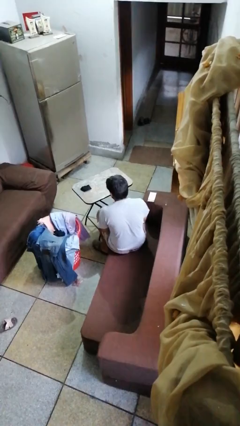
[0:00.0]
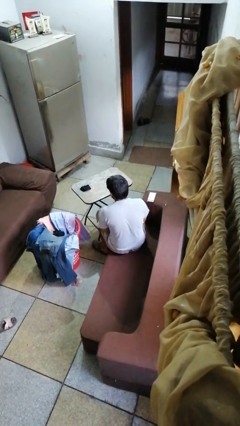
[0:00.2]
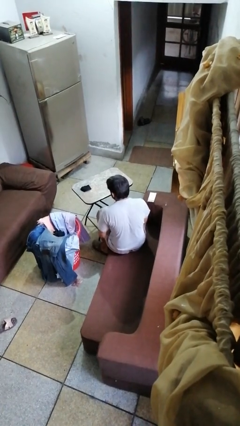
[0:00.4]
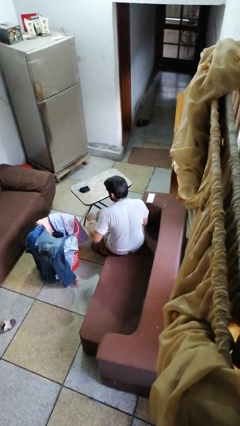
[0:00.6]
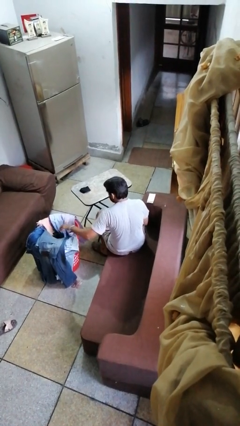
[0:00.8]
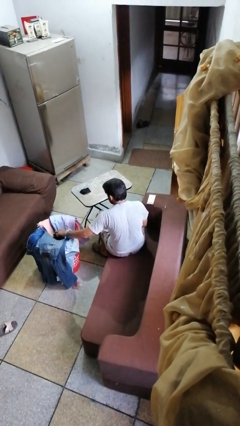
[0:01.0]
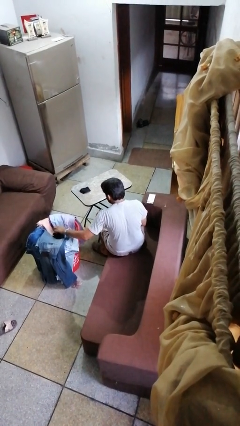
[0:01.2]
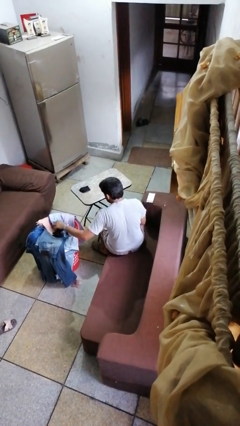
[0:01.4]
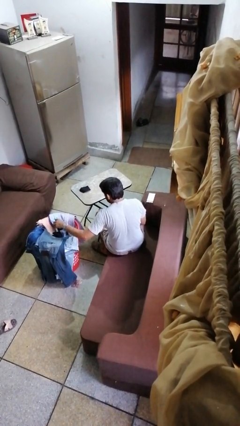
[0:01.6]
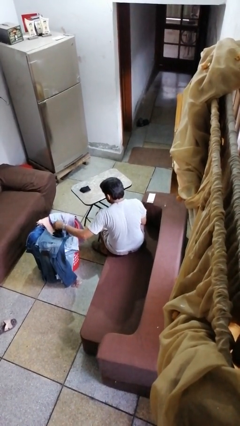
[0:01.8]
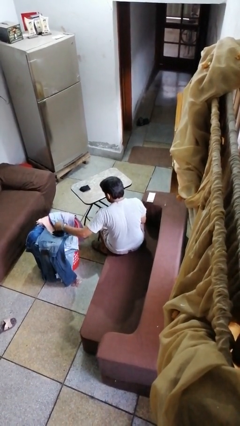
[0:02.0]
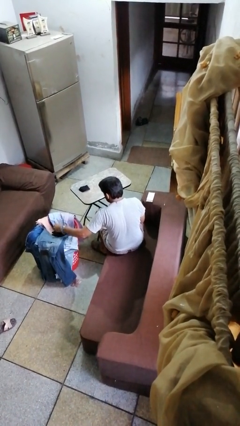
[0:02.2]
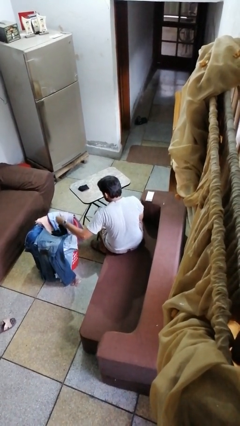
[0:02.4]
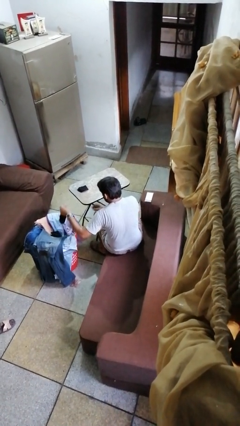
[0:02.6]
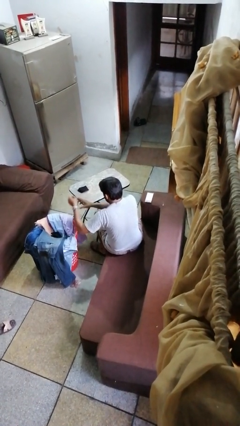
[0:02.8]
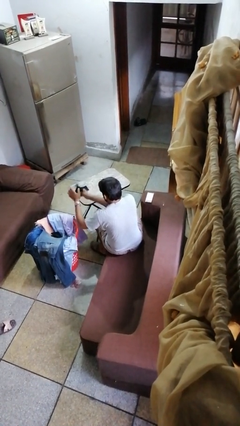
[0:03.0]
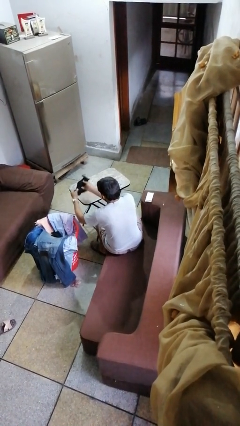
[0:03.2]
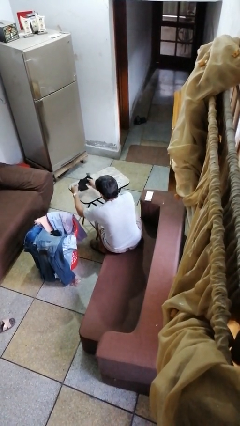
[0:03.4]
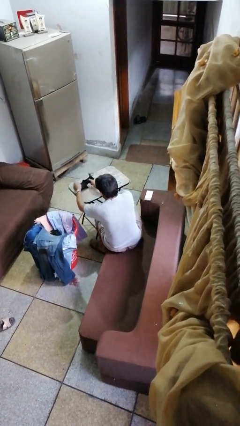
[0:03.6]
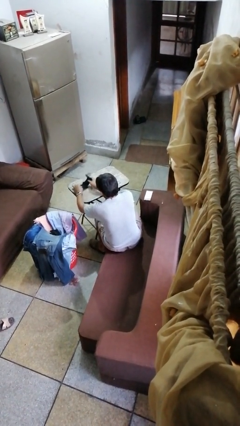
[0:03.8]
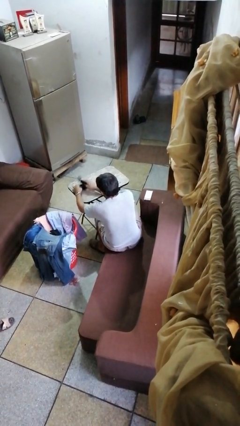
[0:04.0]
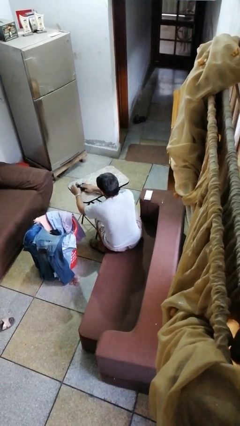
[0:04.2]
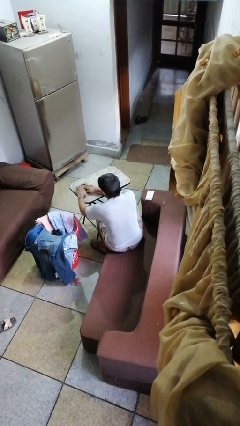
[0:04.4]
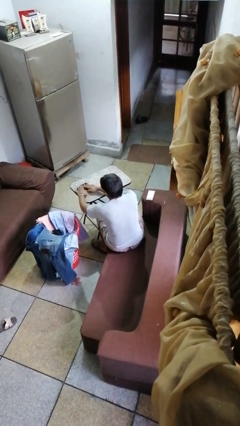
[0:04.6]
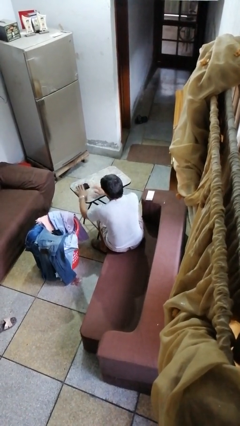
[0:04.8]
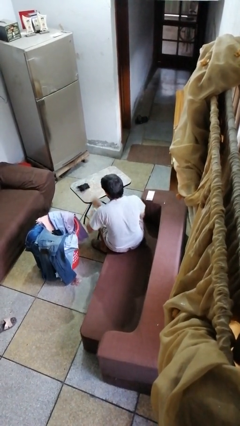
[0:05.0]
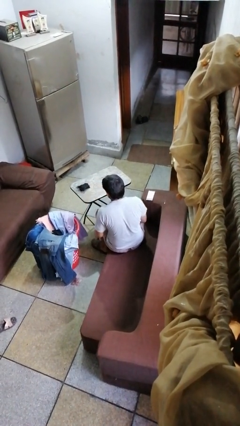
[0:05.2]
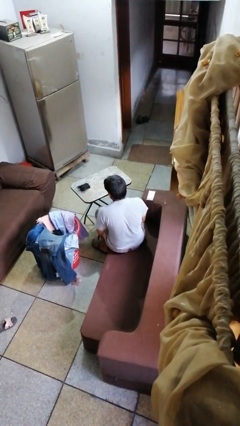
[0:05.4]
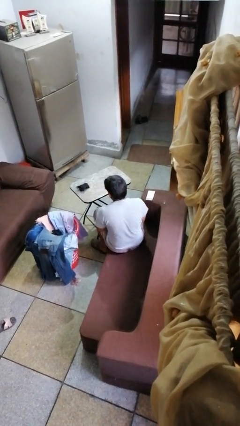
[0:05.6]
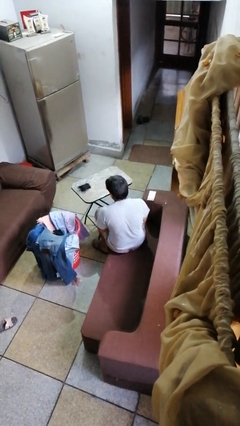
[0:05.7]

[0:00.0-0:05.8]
person folds socks

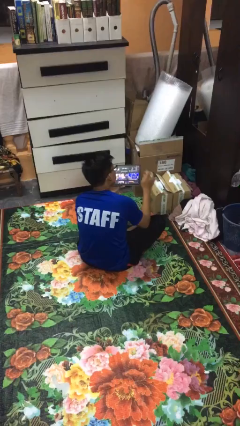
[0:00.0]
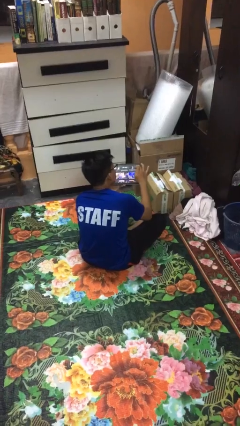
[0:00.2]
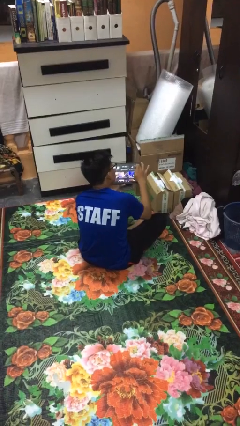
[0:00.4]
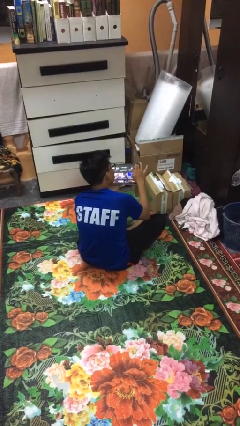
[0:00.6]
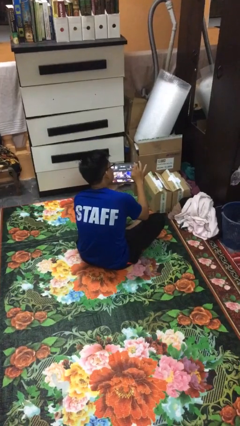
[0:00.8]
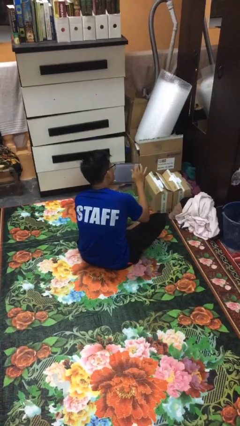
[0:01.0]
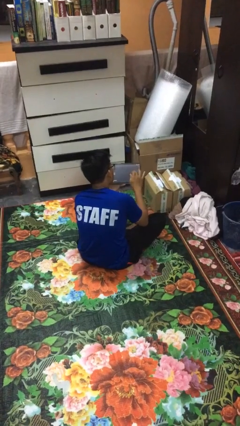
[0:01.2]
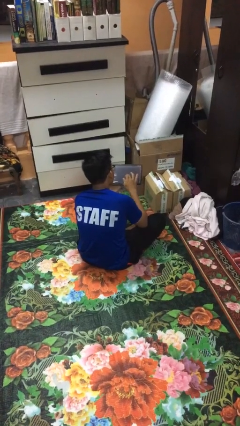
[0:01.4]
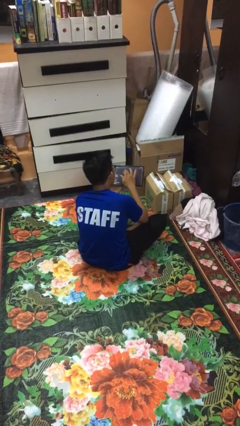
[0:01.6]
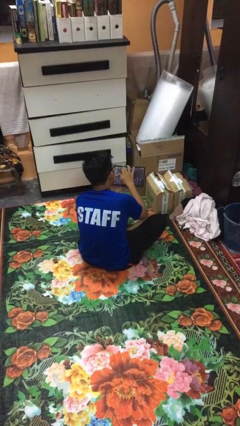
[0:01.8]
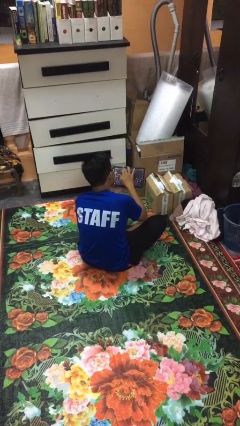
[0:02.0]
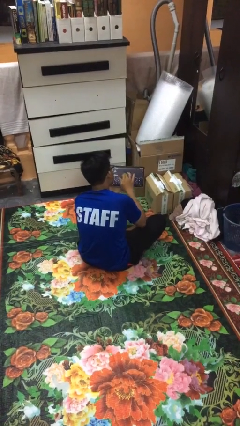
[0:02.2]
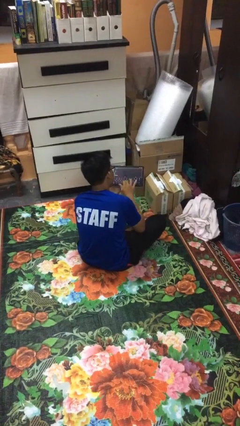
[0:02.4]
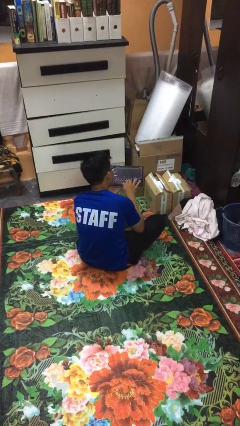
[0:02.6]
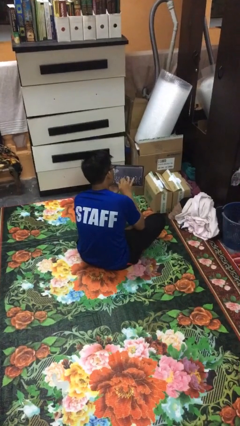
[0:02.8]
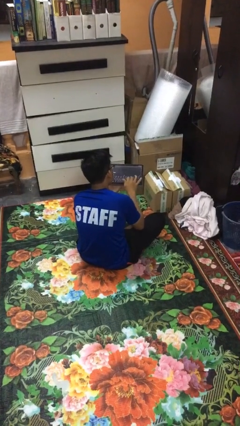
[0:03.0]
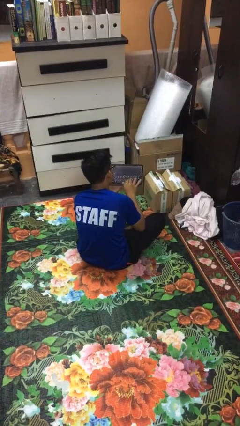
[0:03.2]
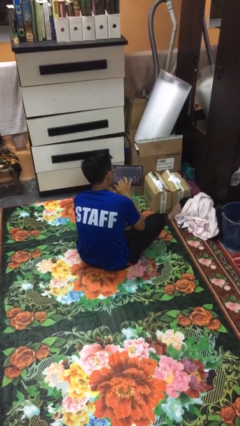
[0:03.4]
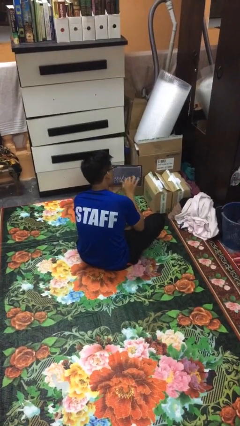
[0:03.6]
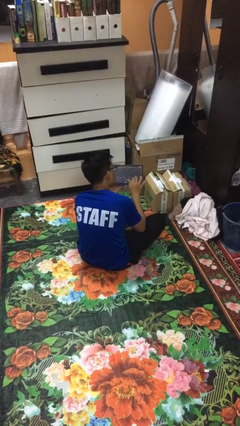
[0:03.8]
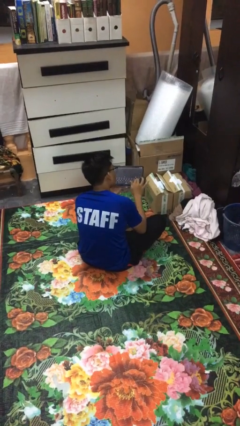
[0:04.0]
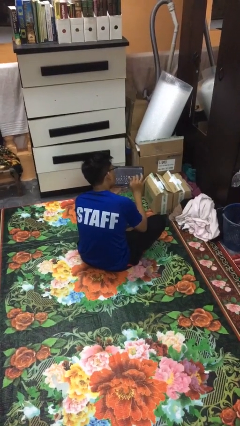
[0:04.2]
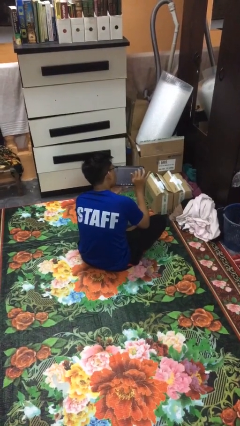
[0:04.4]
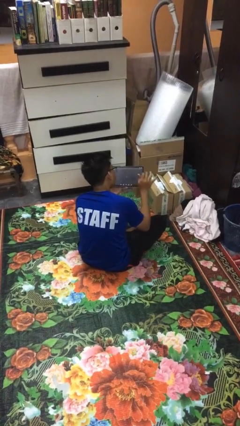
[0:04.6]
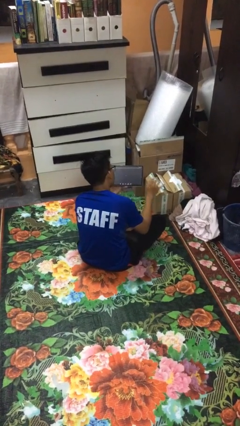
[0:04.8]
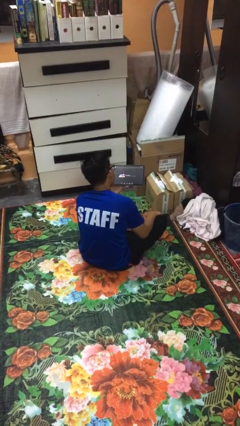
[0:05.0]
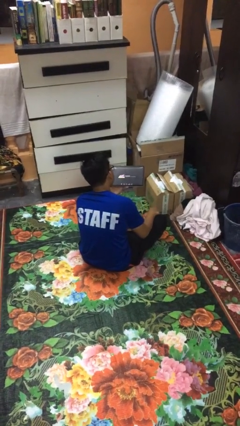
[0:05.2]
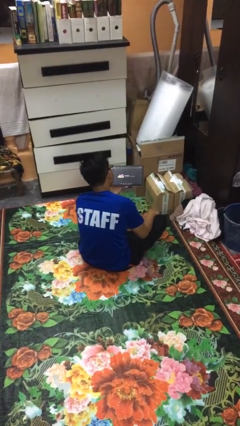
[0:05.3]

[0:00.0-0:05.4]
person interacts with tablet

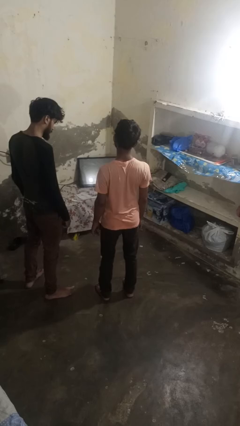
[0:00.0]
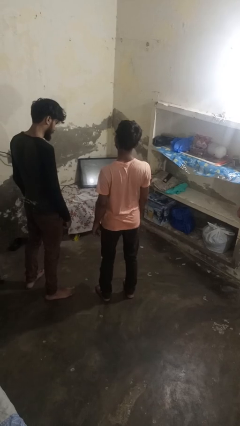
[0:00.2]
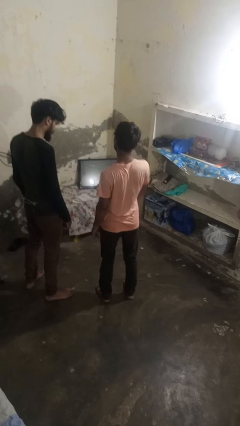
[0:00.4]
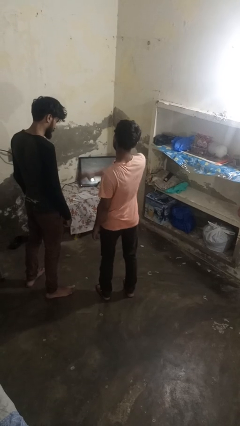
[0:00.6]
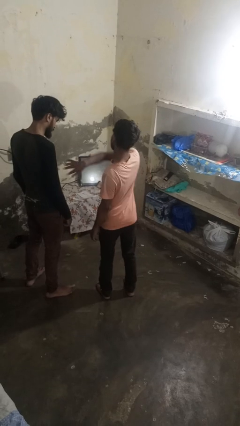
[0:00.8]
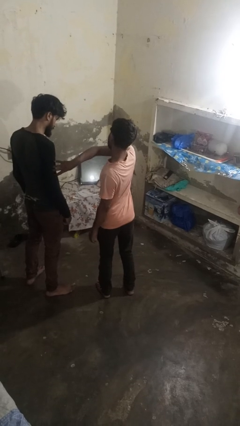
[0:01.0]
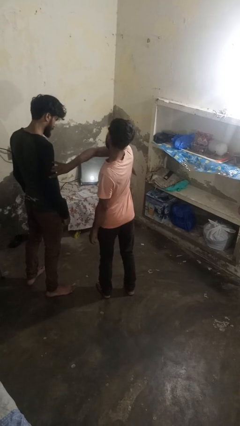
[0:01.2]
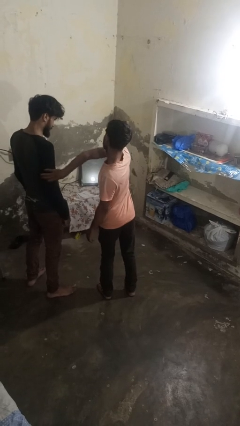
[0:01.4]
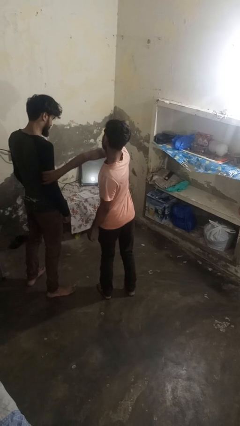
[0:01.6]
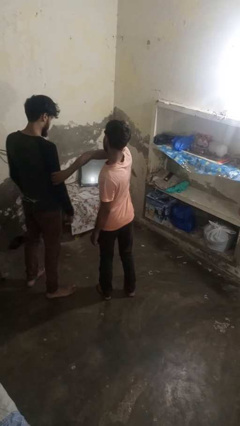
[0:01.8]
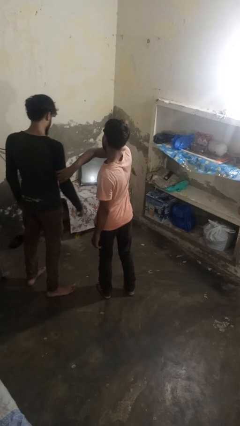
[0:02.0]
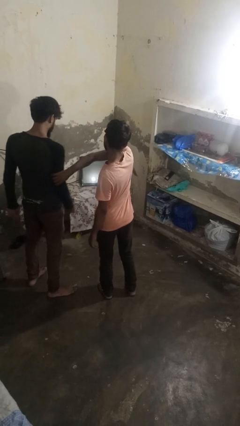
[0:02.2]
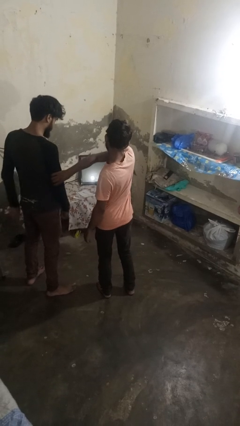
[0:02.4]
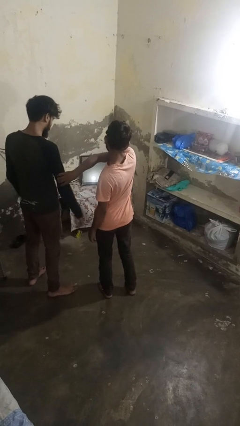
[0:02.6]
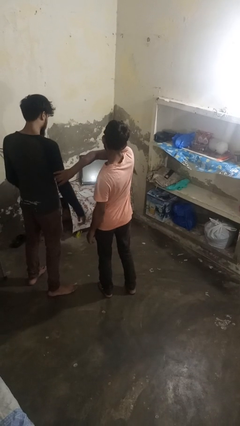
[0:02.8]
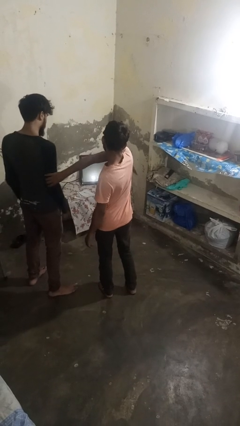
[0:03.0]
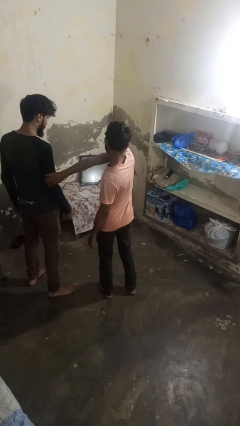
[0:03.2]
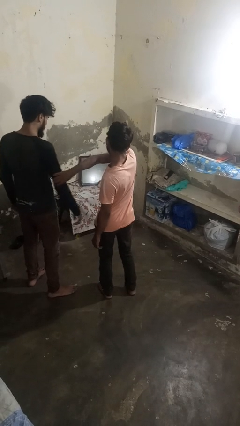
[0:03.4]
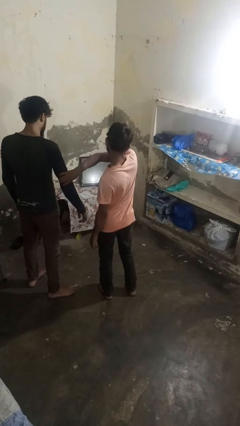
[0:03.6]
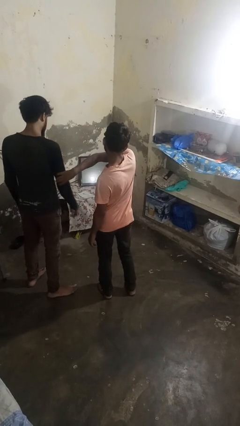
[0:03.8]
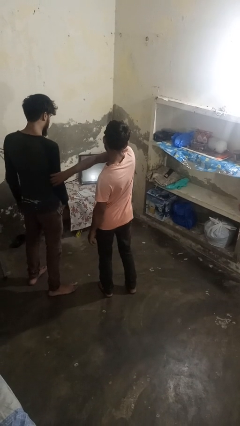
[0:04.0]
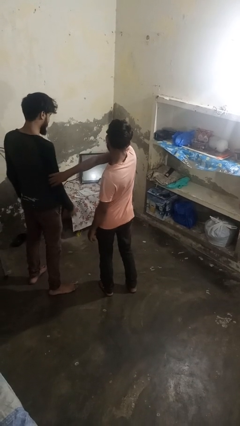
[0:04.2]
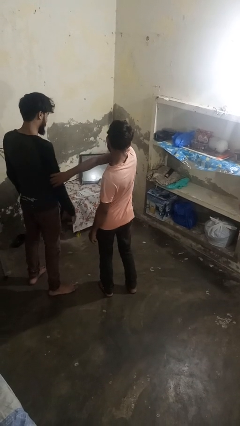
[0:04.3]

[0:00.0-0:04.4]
person grabs person by bicep

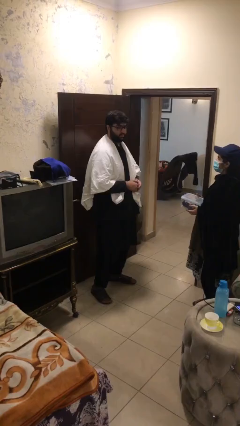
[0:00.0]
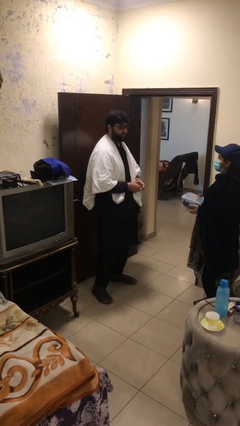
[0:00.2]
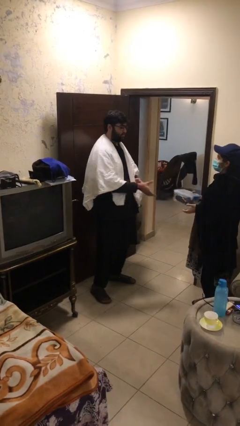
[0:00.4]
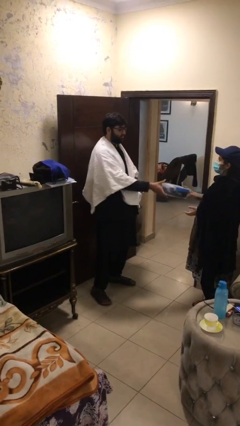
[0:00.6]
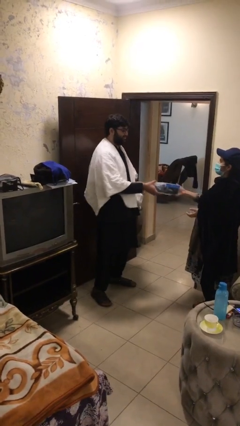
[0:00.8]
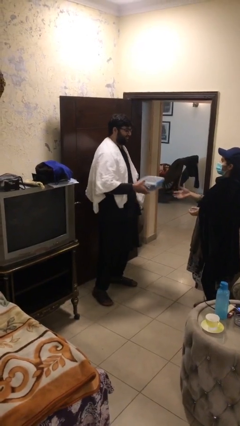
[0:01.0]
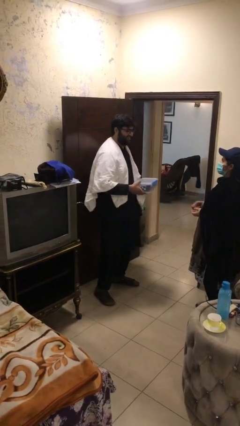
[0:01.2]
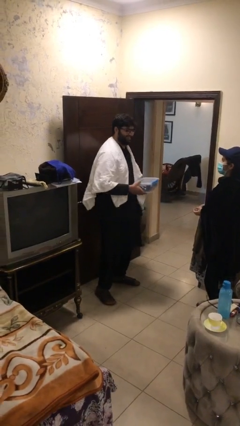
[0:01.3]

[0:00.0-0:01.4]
person transfers object to person

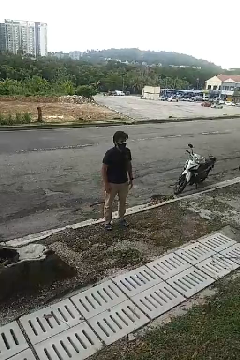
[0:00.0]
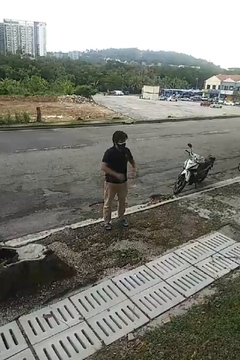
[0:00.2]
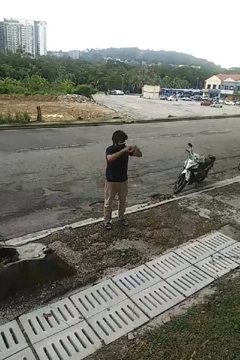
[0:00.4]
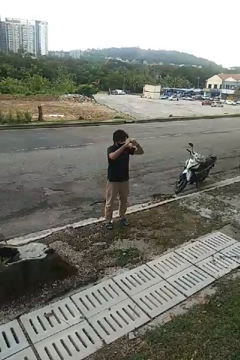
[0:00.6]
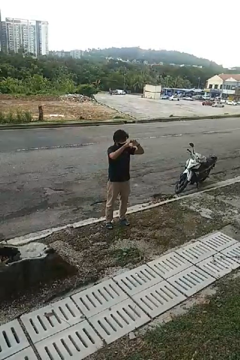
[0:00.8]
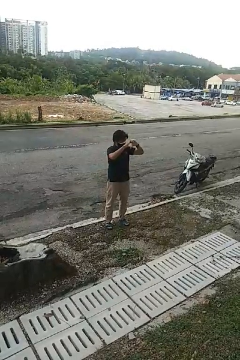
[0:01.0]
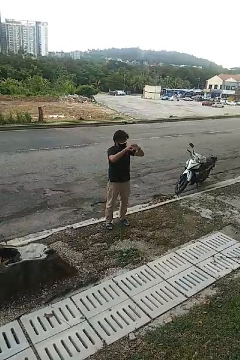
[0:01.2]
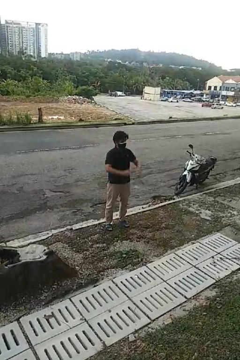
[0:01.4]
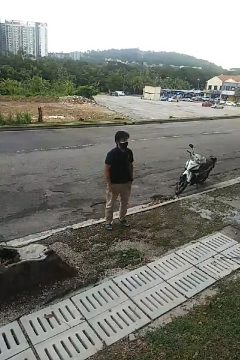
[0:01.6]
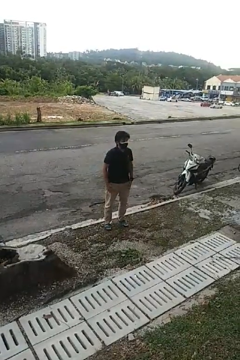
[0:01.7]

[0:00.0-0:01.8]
person gestures heart
